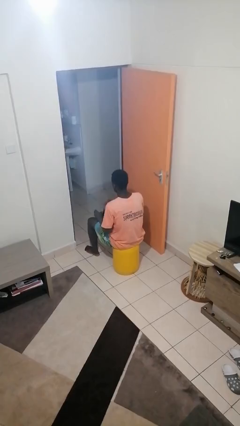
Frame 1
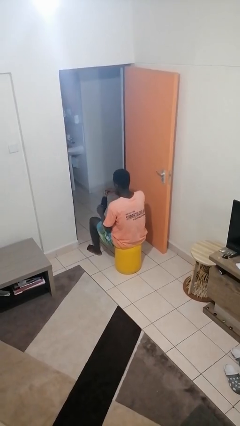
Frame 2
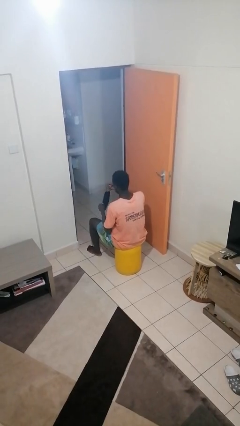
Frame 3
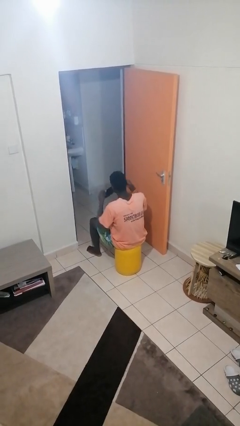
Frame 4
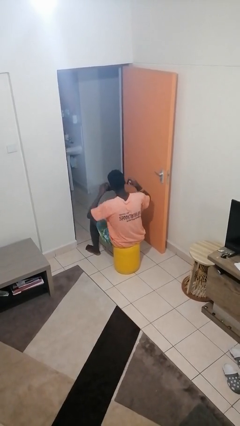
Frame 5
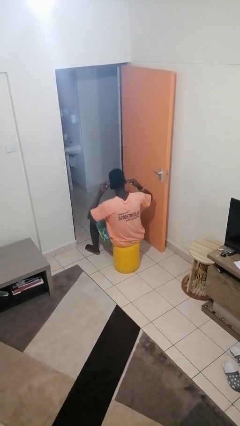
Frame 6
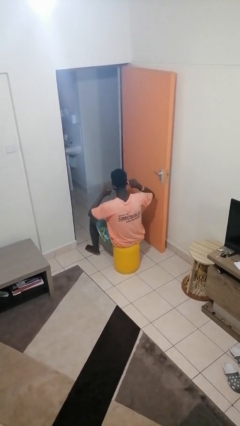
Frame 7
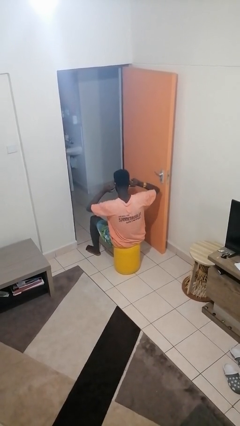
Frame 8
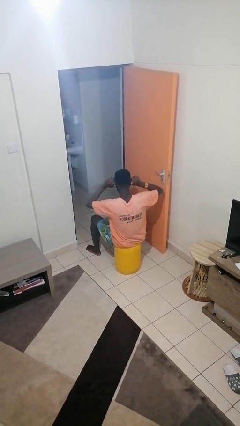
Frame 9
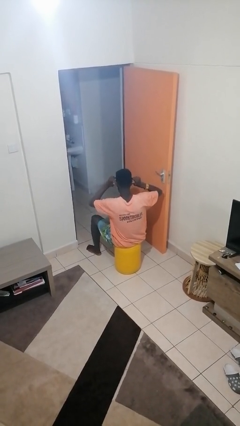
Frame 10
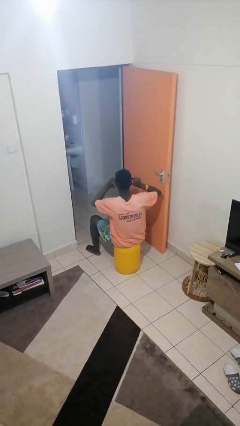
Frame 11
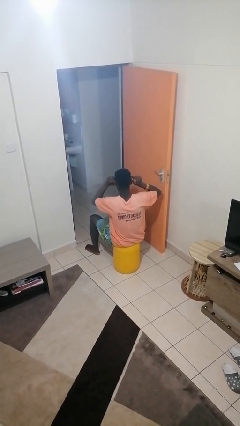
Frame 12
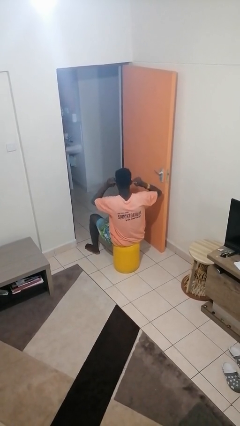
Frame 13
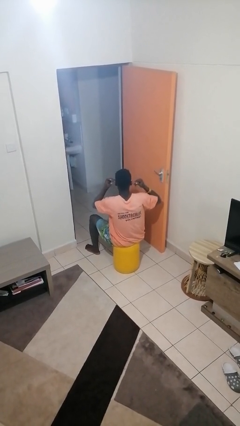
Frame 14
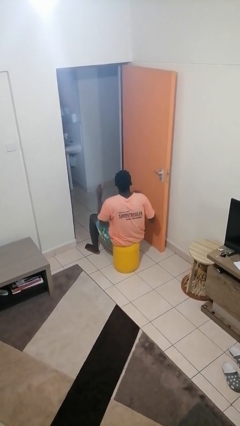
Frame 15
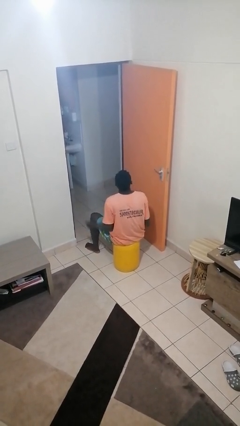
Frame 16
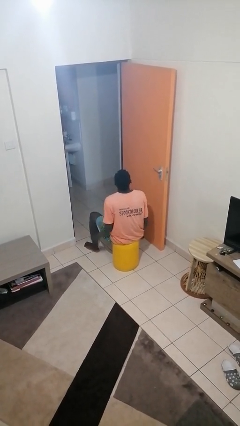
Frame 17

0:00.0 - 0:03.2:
person puts on facemask

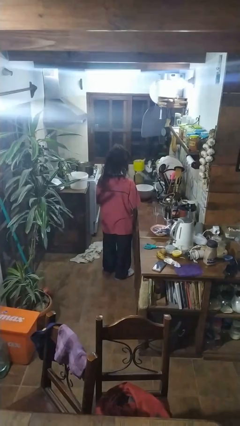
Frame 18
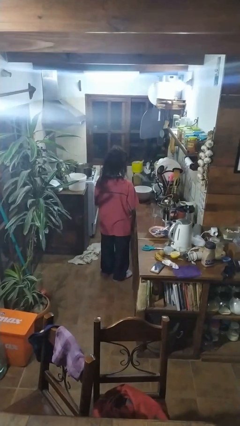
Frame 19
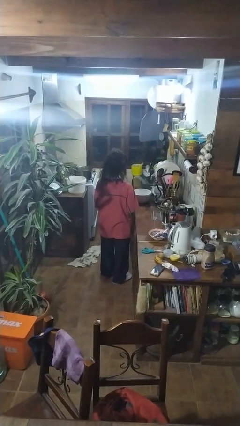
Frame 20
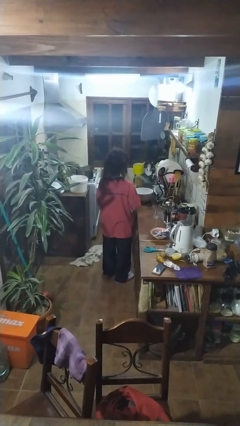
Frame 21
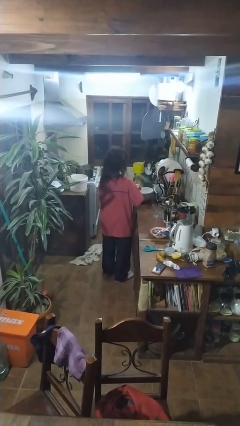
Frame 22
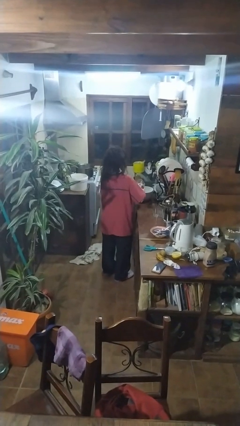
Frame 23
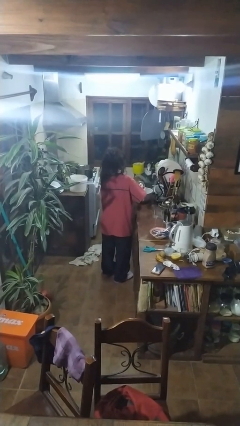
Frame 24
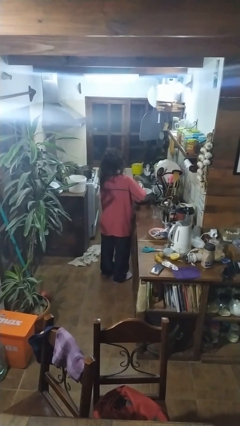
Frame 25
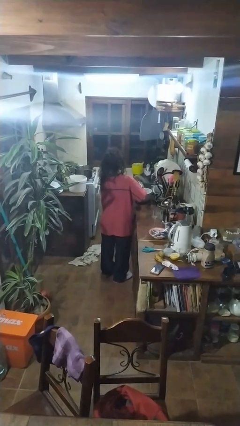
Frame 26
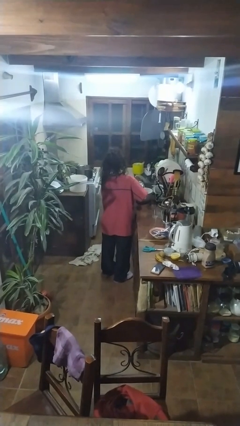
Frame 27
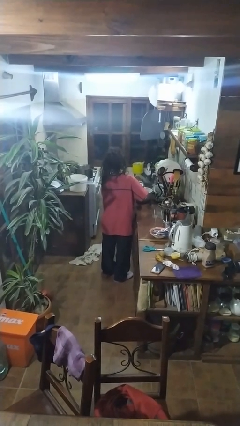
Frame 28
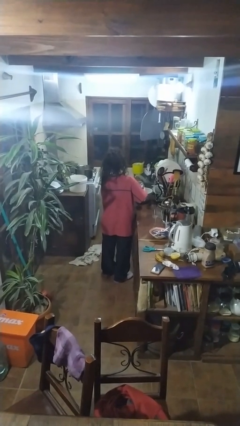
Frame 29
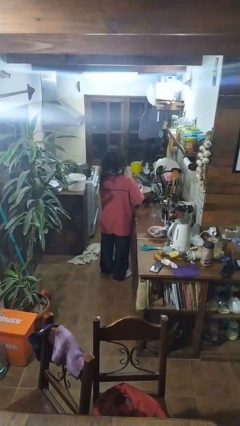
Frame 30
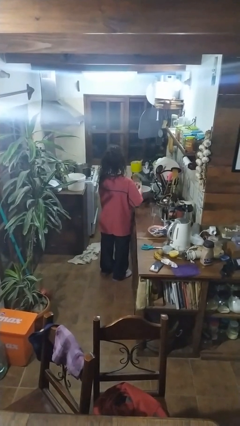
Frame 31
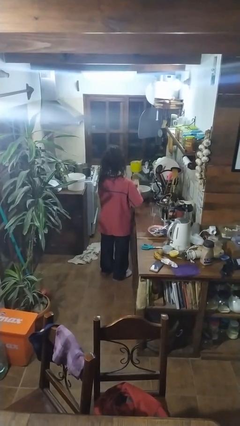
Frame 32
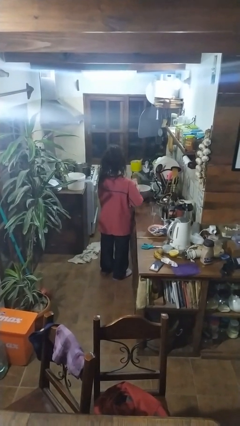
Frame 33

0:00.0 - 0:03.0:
person pours into bowl

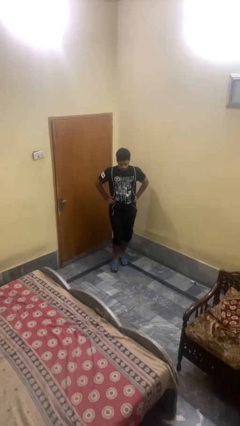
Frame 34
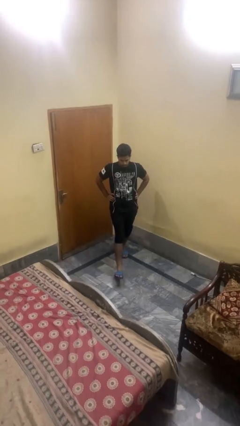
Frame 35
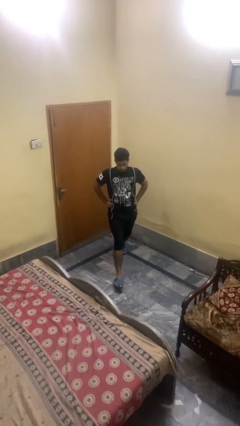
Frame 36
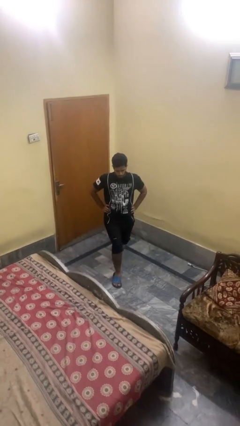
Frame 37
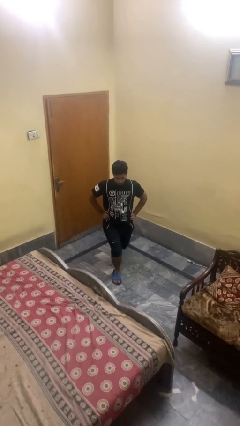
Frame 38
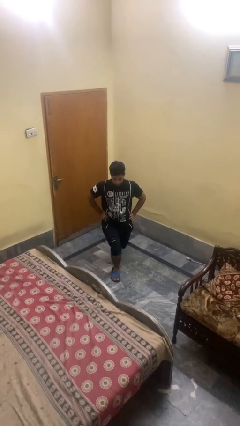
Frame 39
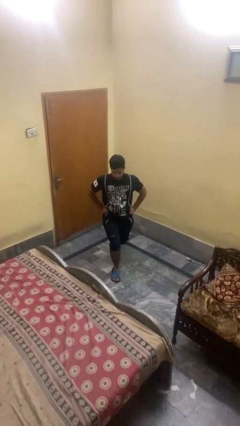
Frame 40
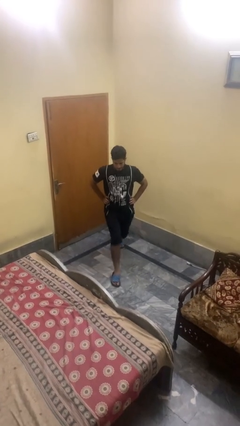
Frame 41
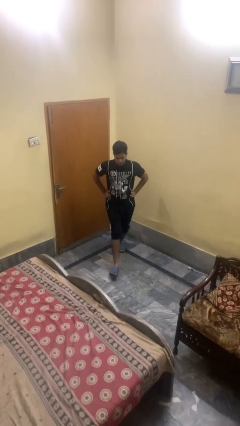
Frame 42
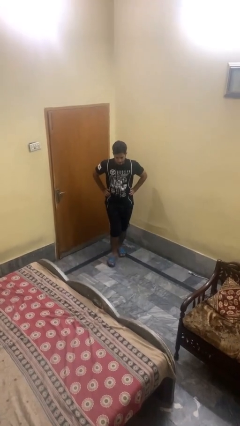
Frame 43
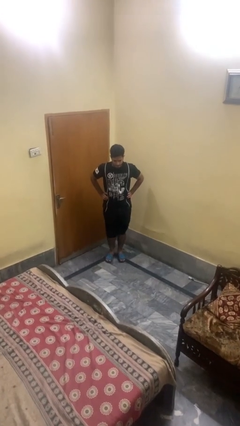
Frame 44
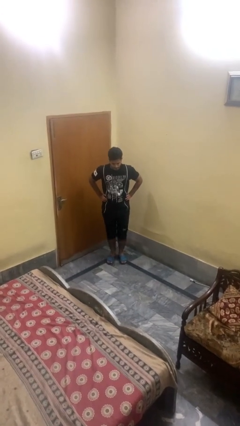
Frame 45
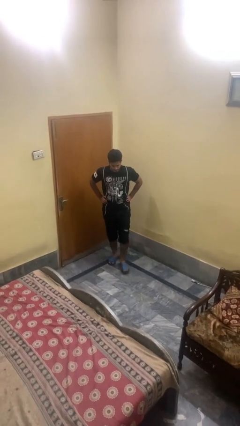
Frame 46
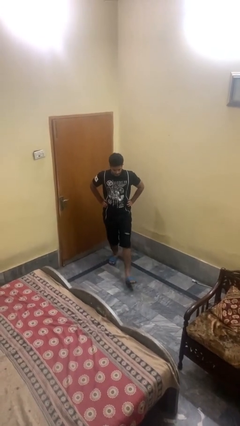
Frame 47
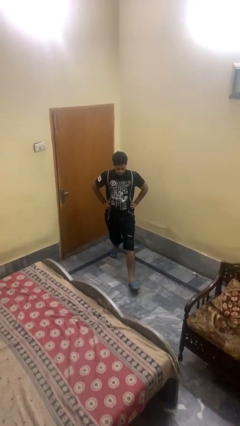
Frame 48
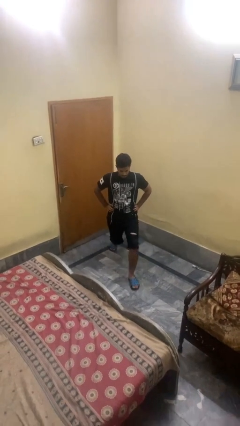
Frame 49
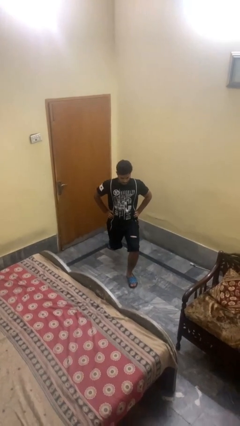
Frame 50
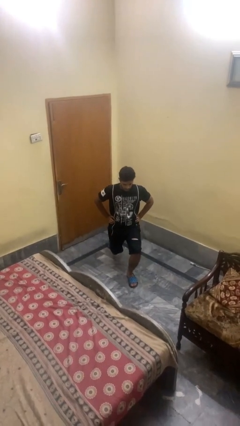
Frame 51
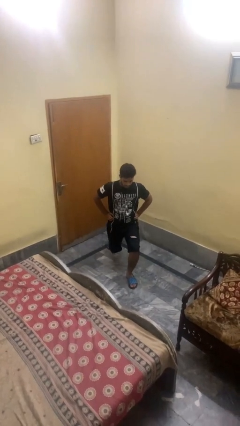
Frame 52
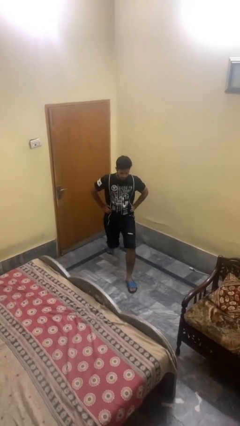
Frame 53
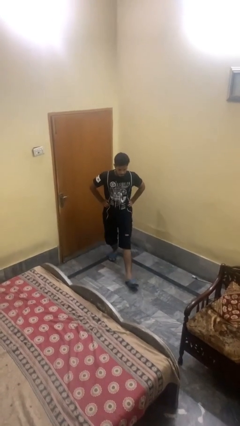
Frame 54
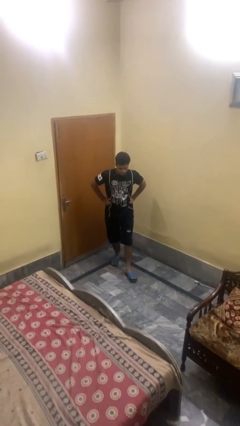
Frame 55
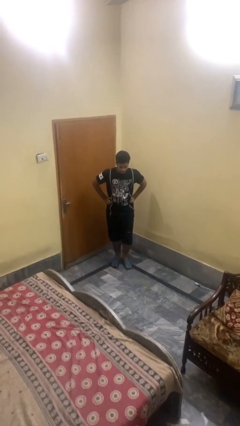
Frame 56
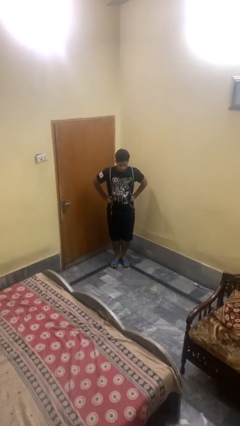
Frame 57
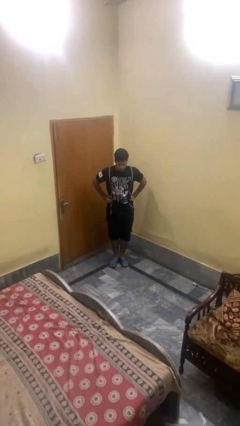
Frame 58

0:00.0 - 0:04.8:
person exercises with lunges

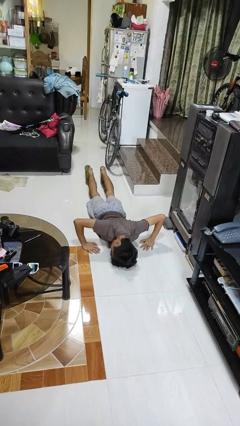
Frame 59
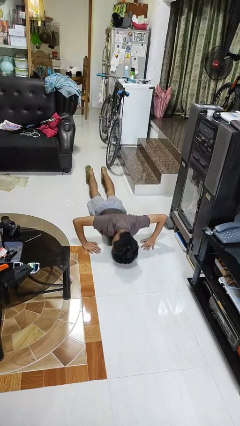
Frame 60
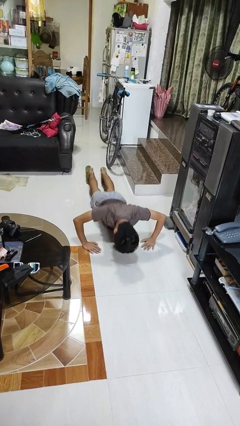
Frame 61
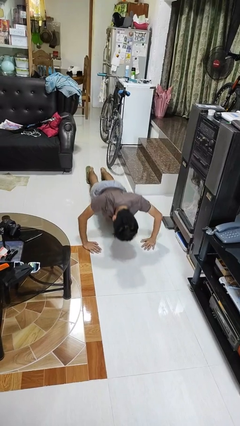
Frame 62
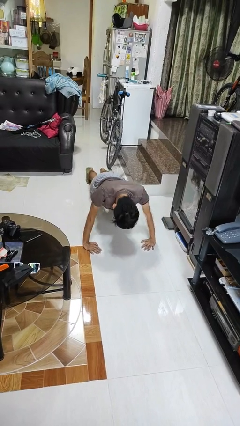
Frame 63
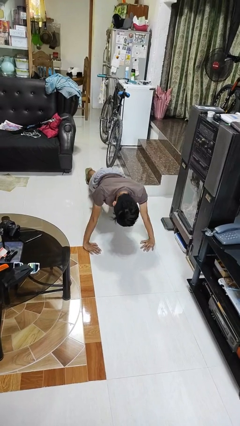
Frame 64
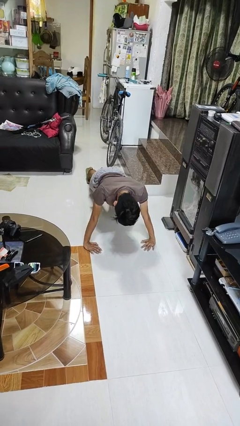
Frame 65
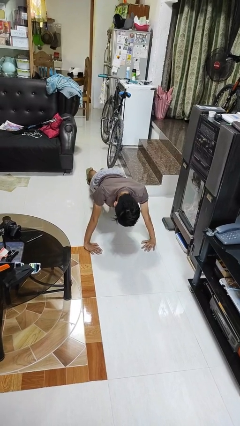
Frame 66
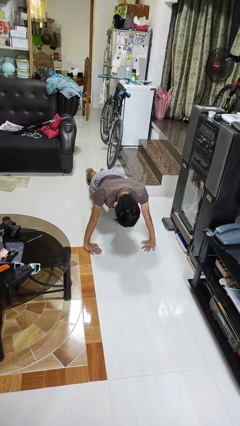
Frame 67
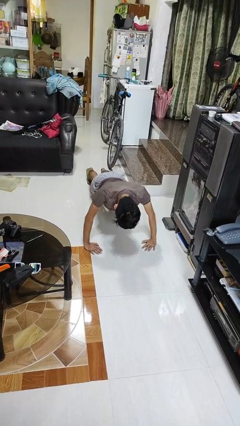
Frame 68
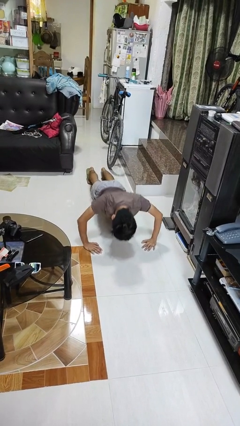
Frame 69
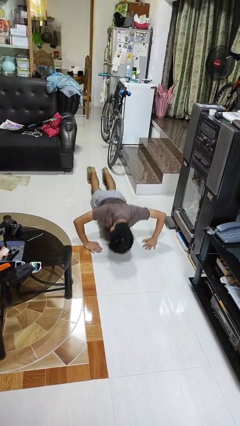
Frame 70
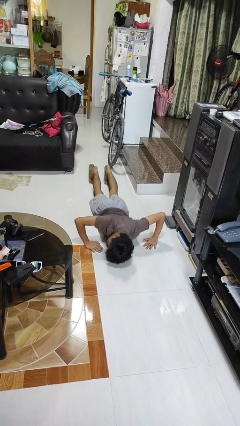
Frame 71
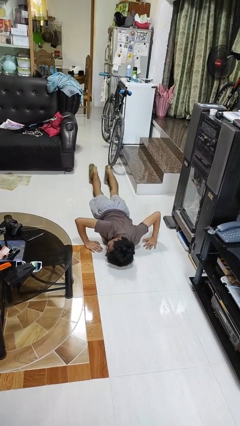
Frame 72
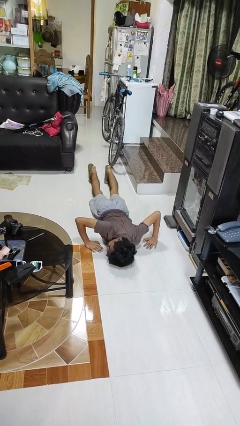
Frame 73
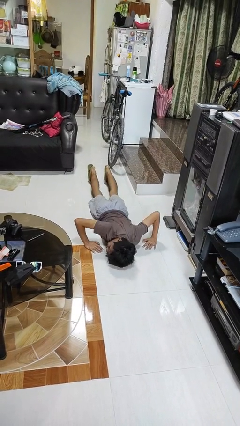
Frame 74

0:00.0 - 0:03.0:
person exercises with pushup

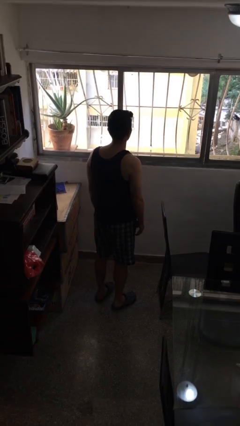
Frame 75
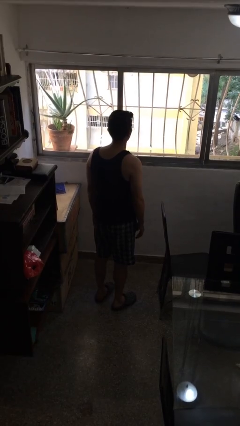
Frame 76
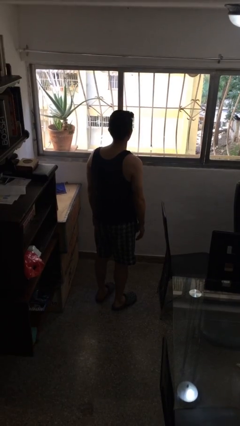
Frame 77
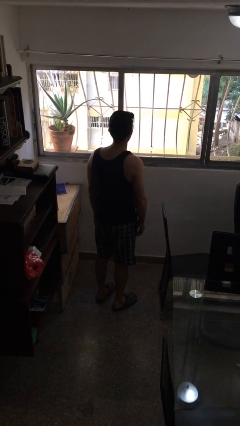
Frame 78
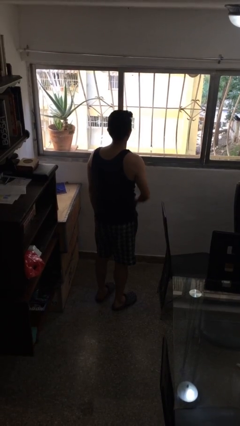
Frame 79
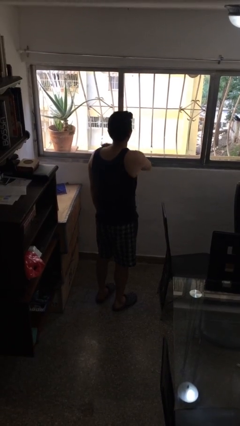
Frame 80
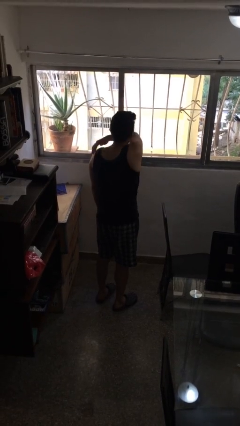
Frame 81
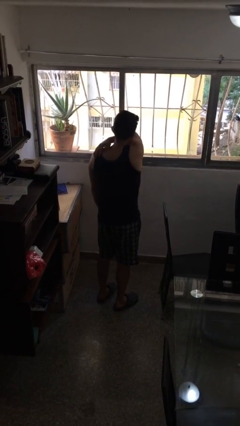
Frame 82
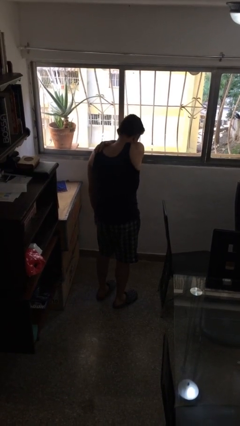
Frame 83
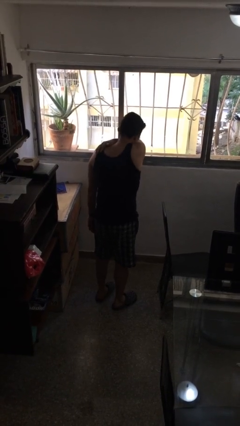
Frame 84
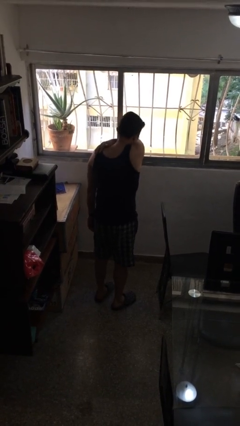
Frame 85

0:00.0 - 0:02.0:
person sneezes into arm

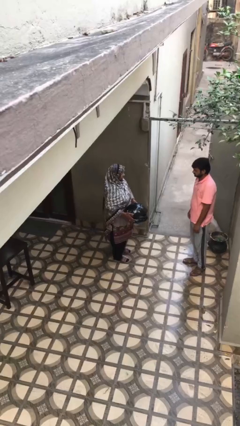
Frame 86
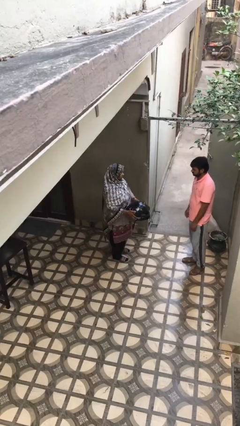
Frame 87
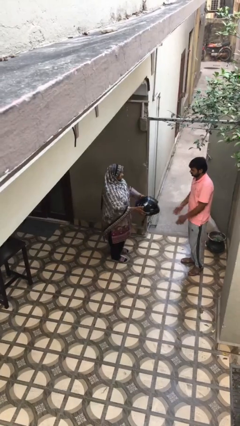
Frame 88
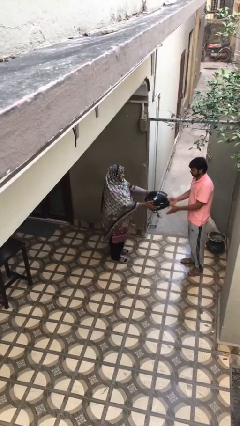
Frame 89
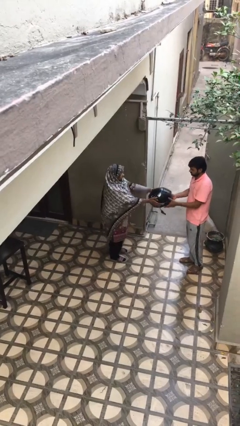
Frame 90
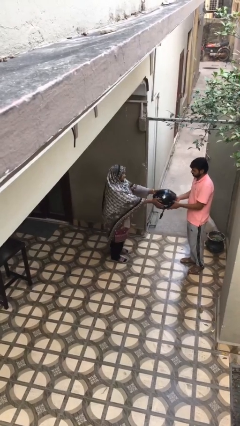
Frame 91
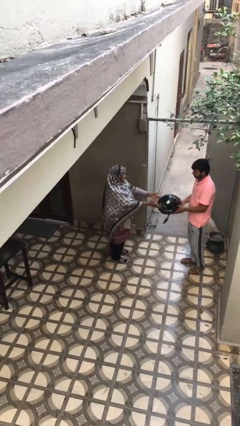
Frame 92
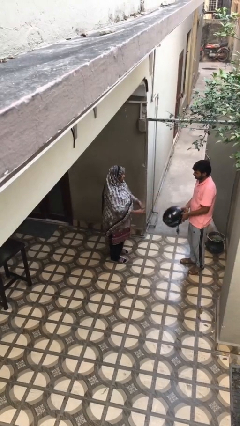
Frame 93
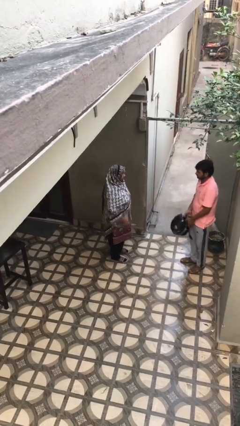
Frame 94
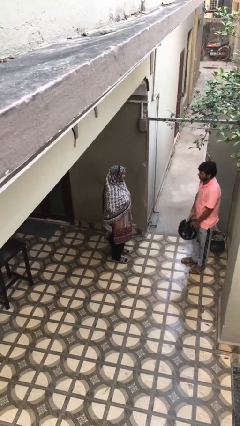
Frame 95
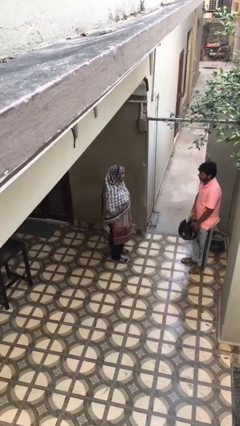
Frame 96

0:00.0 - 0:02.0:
person transfers object to person
